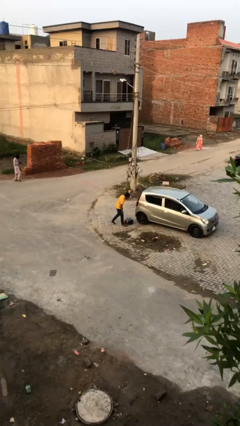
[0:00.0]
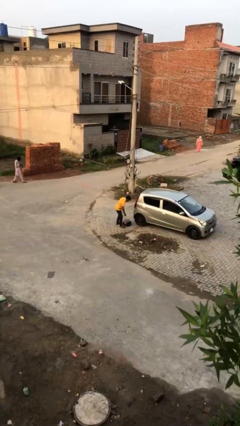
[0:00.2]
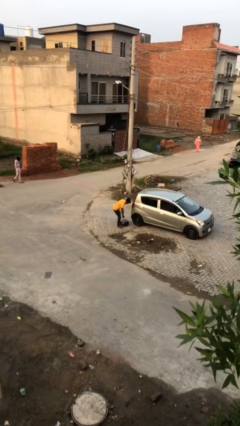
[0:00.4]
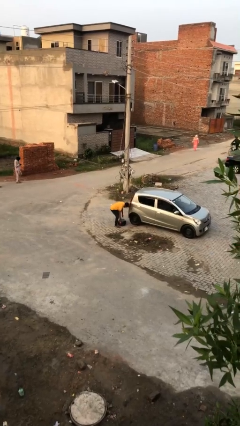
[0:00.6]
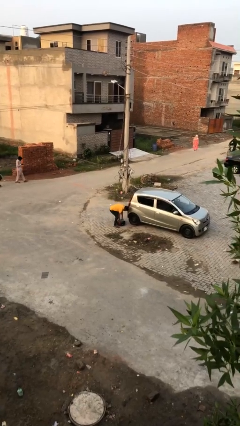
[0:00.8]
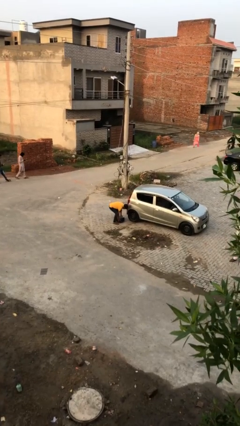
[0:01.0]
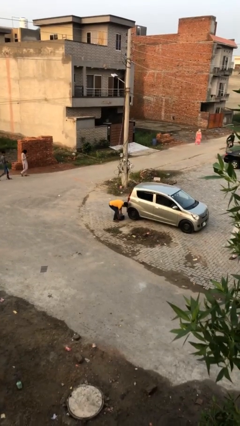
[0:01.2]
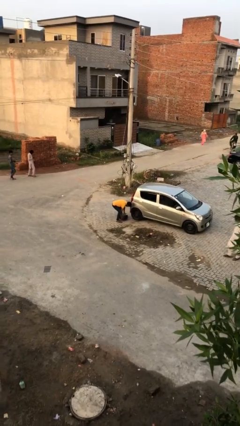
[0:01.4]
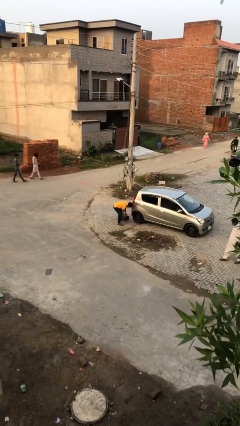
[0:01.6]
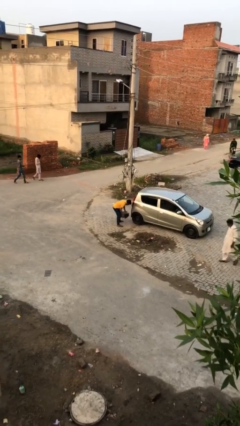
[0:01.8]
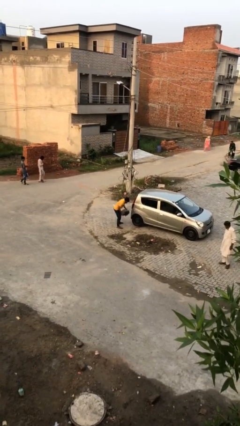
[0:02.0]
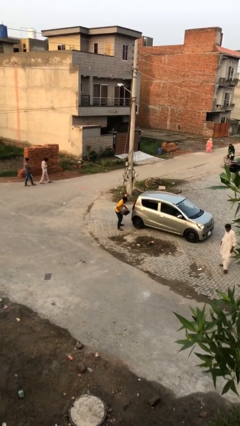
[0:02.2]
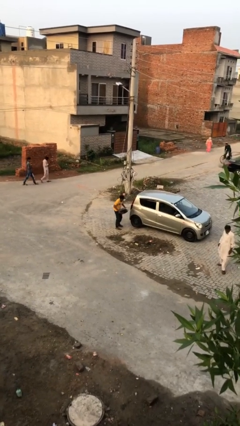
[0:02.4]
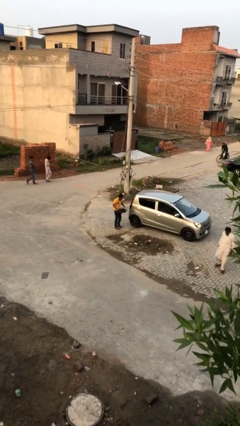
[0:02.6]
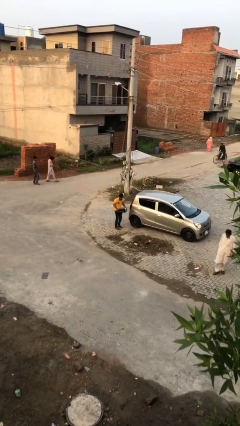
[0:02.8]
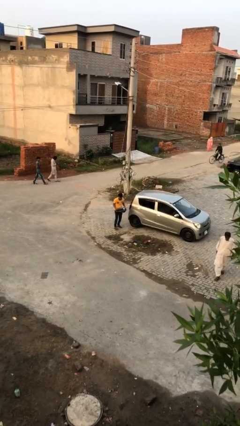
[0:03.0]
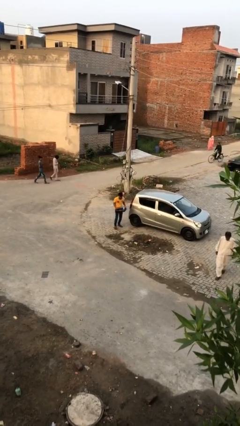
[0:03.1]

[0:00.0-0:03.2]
person picks up object from floor

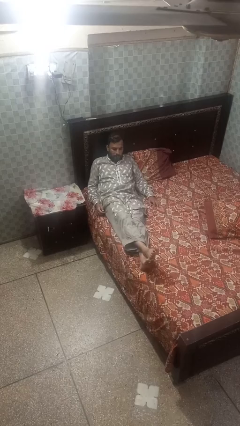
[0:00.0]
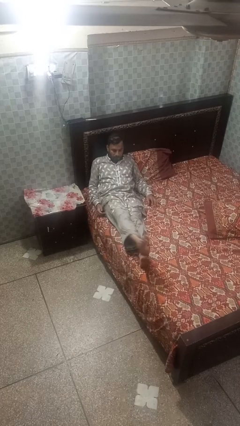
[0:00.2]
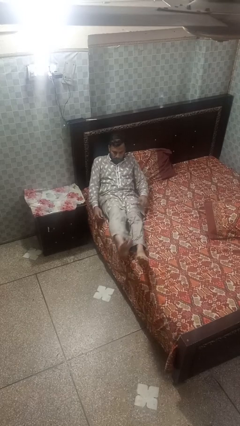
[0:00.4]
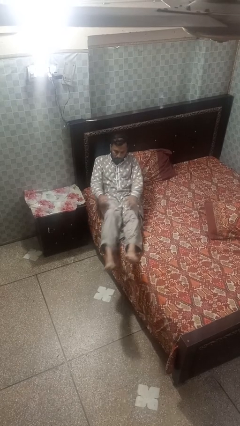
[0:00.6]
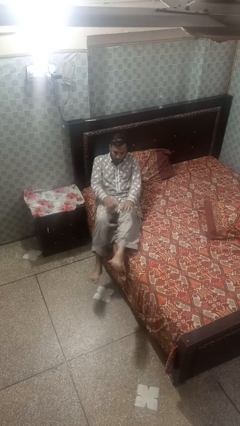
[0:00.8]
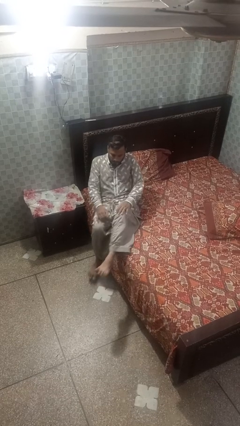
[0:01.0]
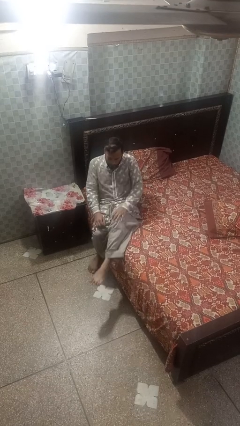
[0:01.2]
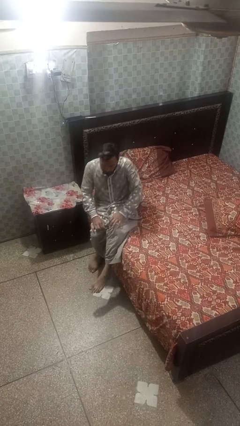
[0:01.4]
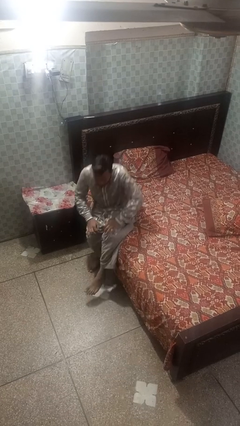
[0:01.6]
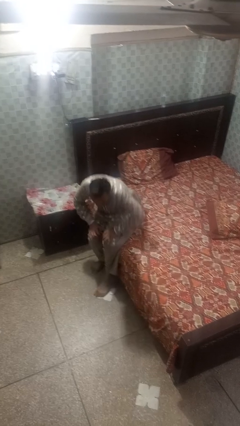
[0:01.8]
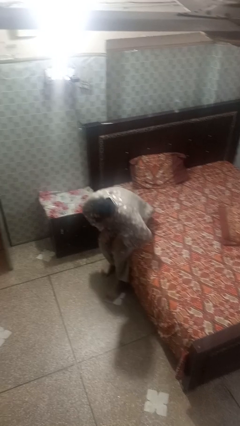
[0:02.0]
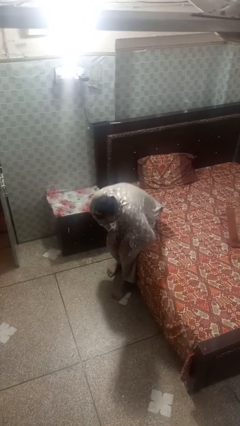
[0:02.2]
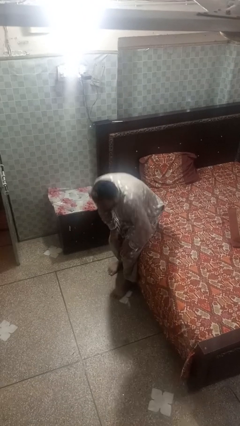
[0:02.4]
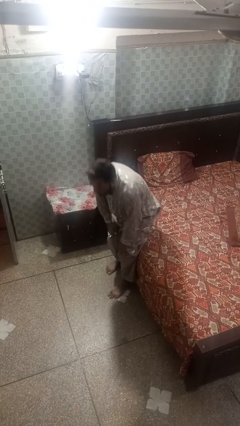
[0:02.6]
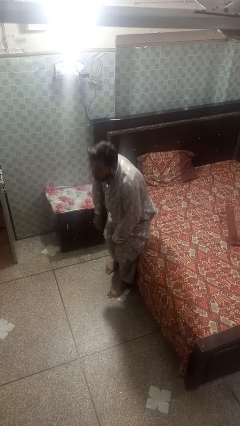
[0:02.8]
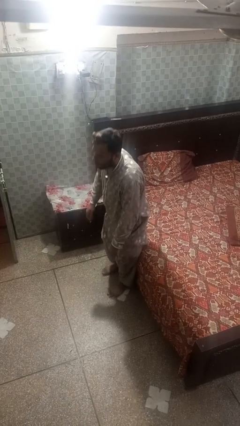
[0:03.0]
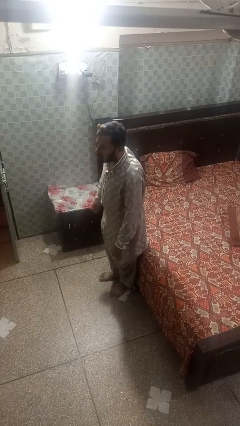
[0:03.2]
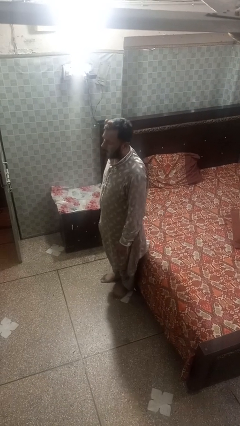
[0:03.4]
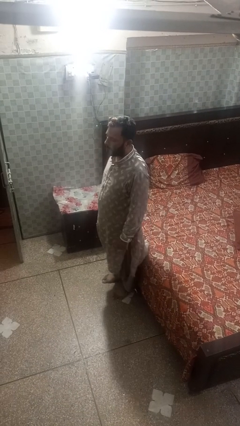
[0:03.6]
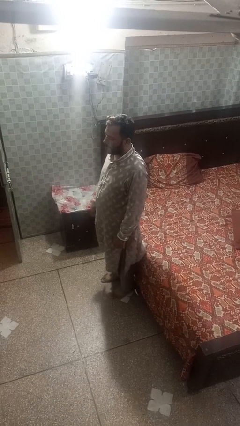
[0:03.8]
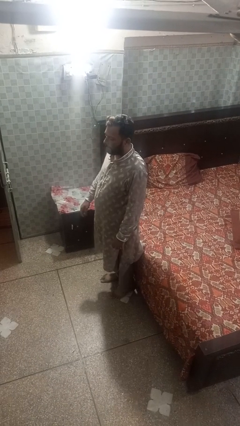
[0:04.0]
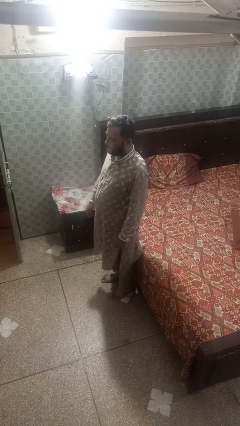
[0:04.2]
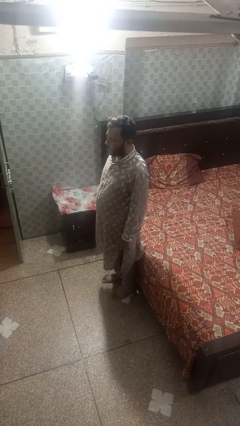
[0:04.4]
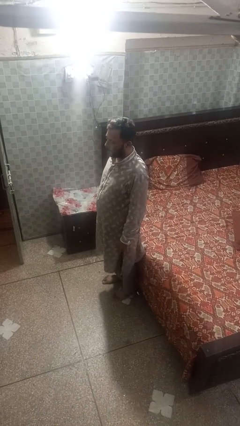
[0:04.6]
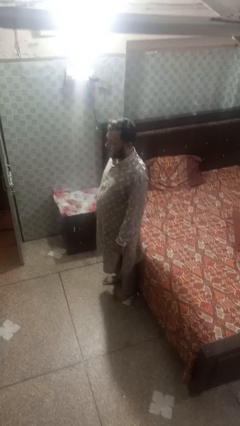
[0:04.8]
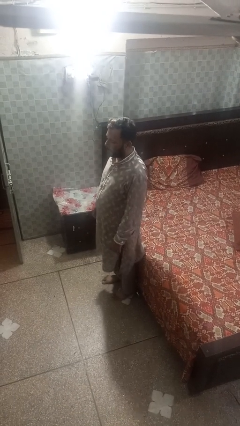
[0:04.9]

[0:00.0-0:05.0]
person stands up

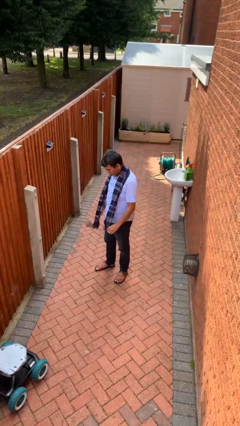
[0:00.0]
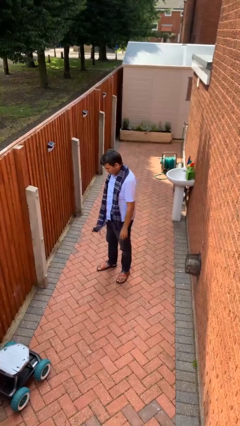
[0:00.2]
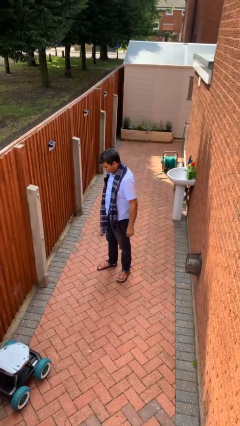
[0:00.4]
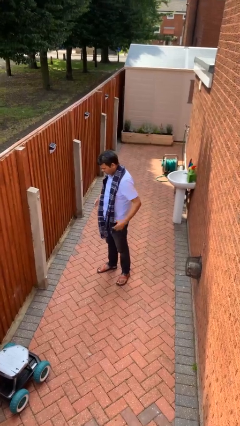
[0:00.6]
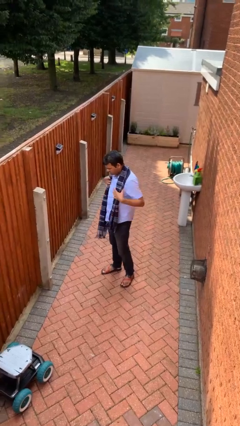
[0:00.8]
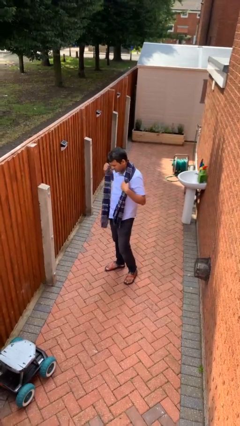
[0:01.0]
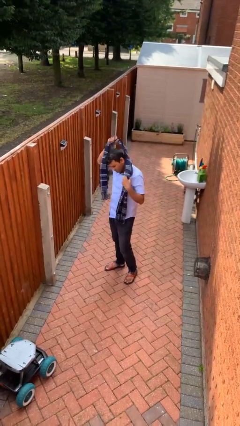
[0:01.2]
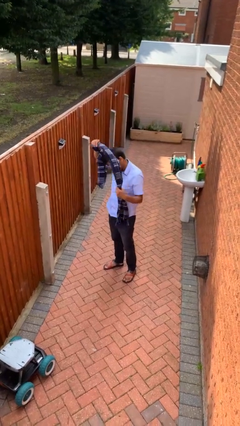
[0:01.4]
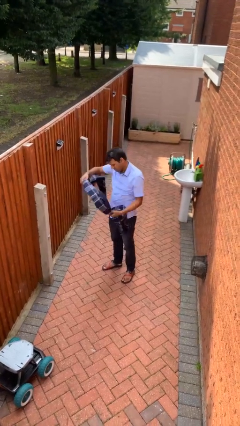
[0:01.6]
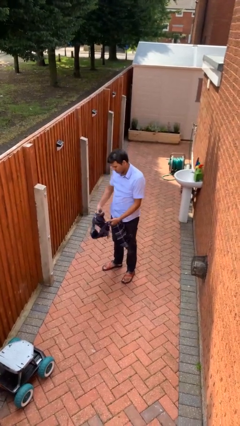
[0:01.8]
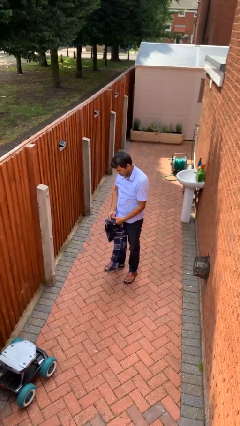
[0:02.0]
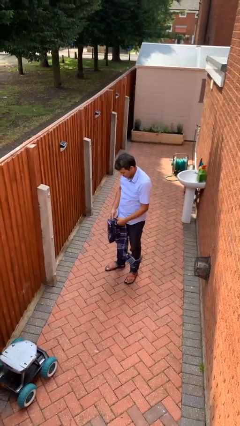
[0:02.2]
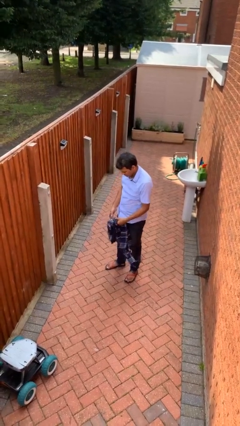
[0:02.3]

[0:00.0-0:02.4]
person takes off scarf

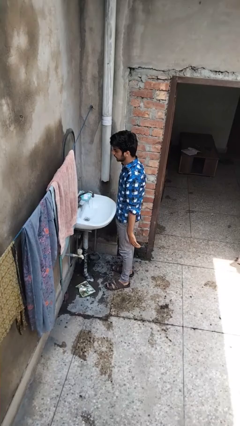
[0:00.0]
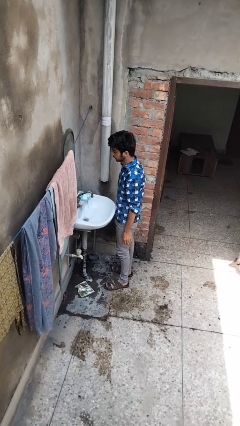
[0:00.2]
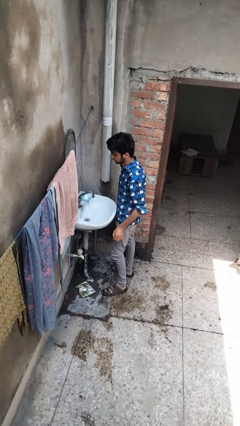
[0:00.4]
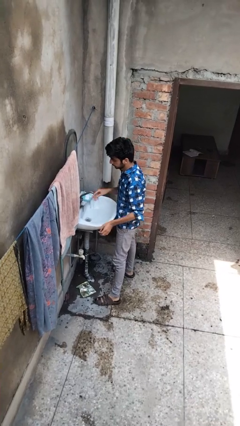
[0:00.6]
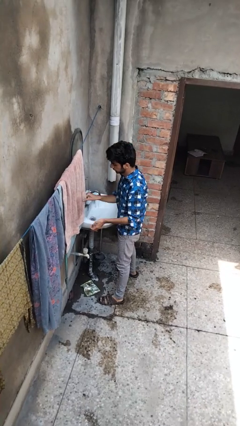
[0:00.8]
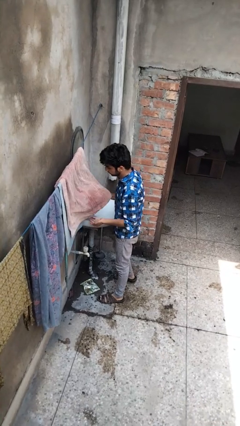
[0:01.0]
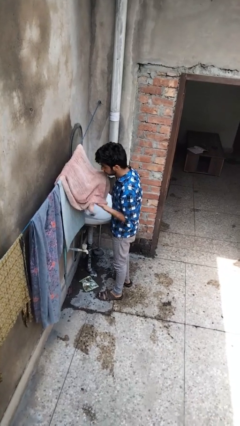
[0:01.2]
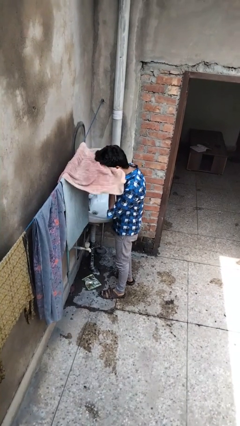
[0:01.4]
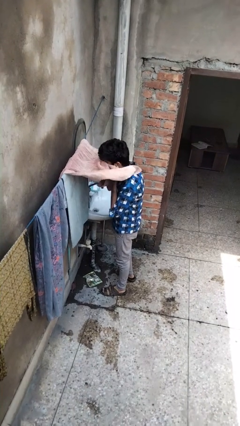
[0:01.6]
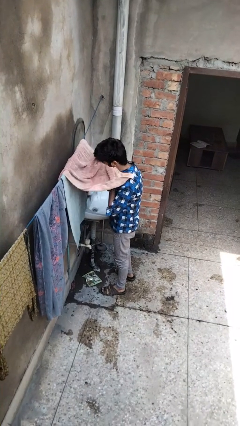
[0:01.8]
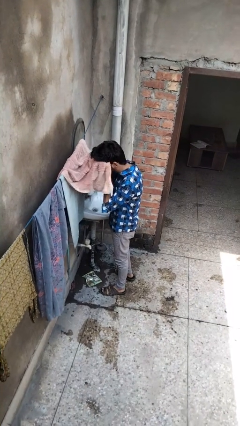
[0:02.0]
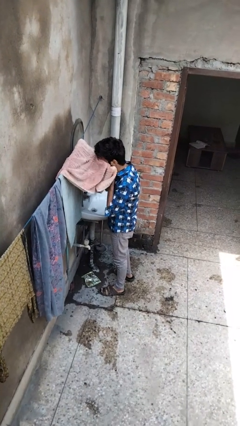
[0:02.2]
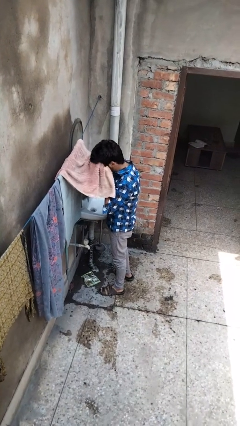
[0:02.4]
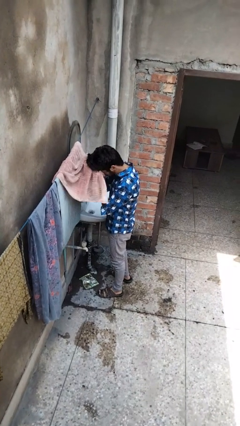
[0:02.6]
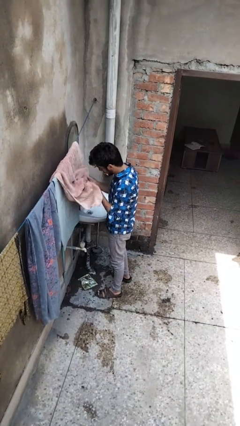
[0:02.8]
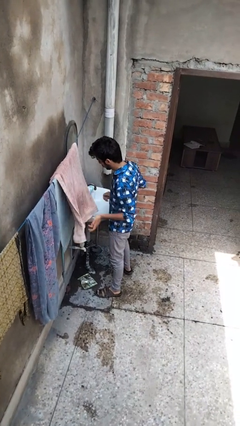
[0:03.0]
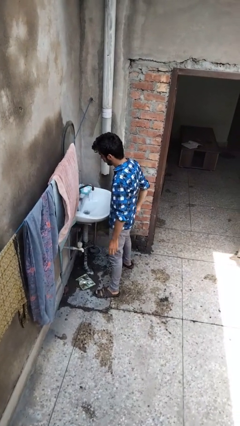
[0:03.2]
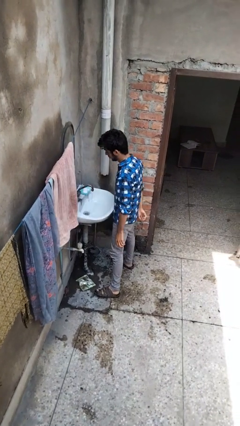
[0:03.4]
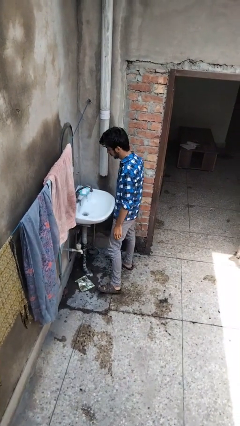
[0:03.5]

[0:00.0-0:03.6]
person dries face with towel

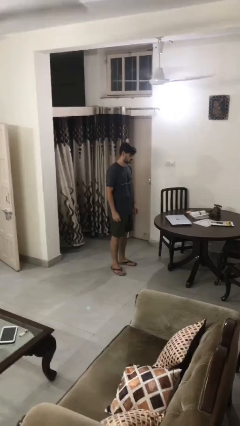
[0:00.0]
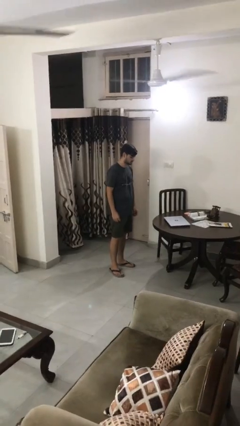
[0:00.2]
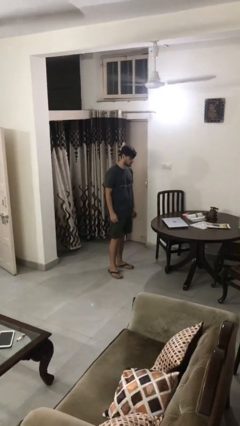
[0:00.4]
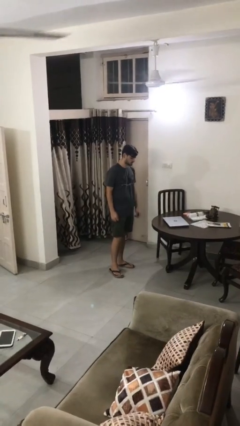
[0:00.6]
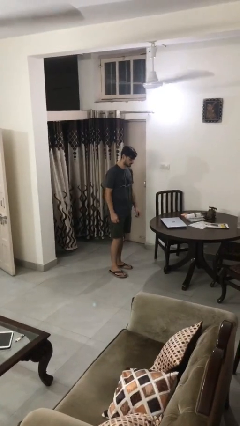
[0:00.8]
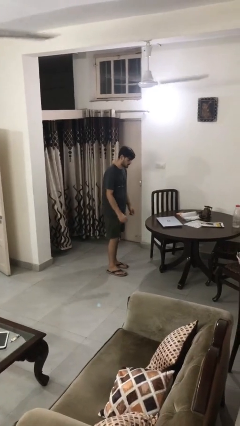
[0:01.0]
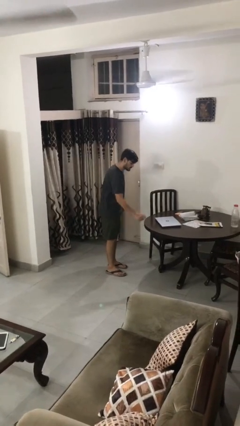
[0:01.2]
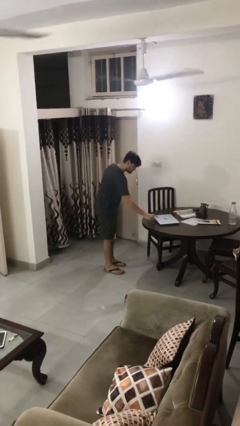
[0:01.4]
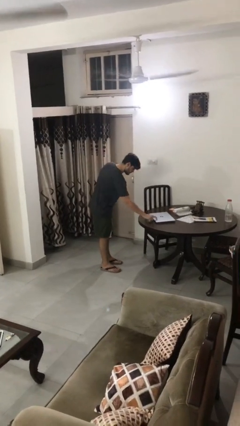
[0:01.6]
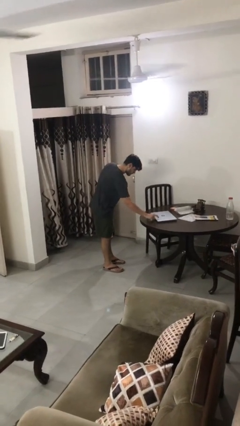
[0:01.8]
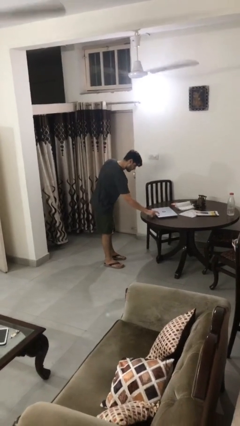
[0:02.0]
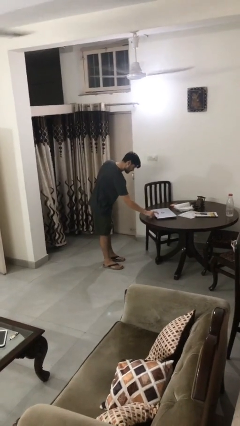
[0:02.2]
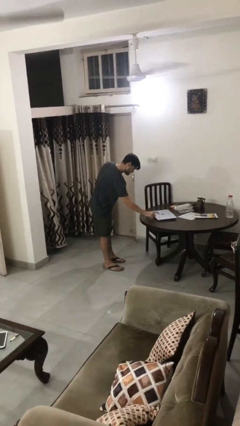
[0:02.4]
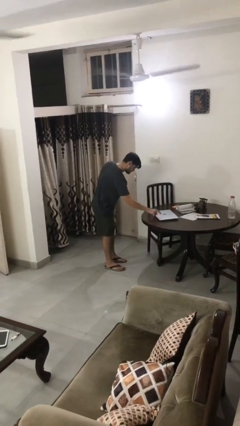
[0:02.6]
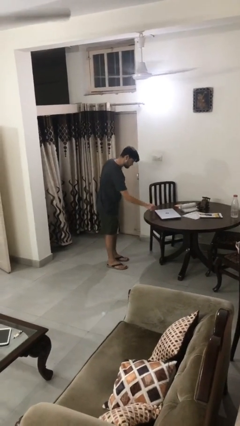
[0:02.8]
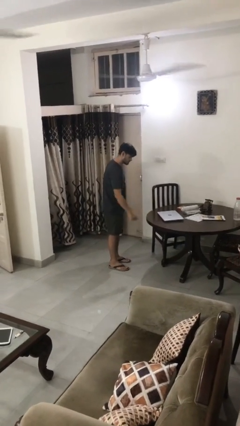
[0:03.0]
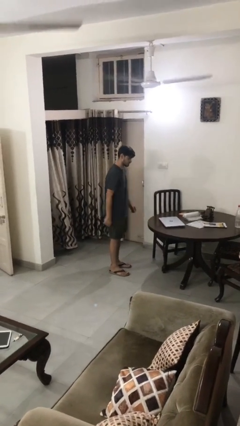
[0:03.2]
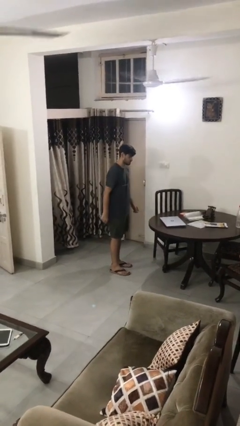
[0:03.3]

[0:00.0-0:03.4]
person taps object with finger
